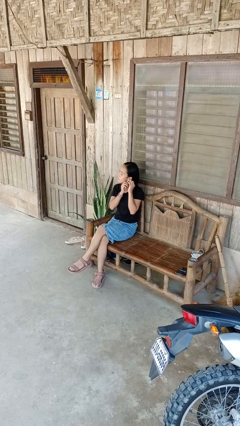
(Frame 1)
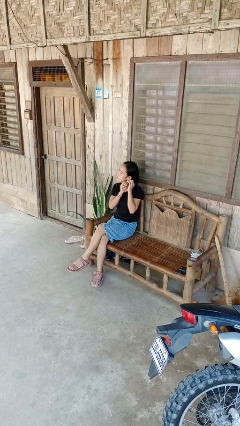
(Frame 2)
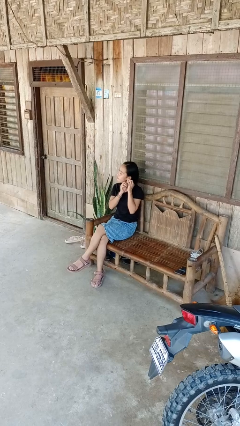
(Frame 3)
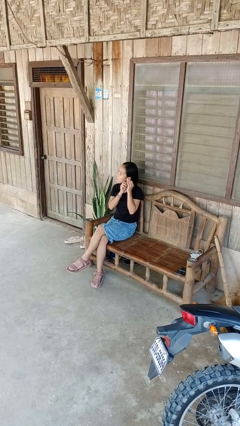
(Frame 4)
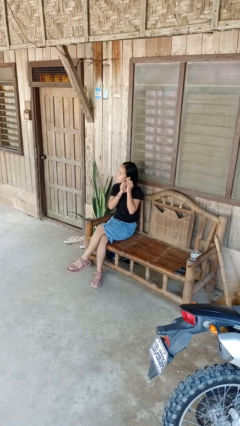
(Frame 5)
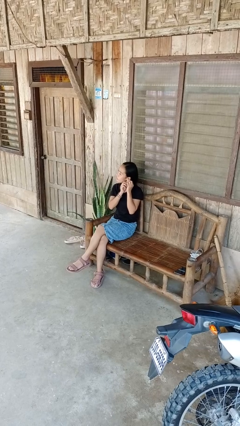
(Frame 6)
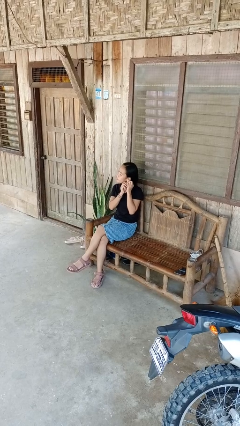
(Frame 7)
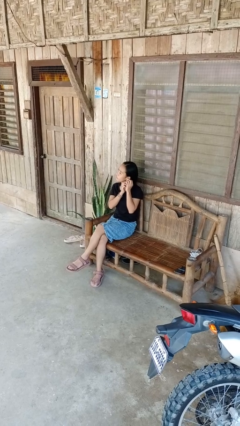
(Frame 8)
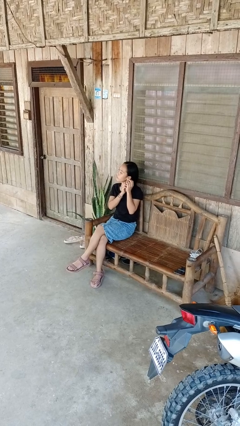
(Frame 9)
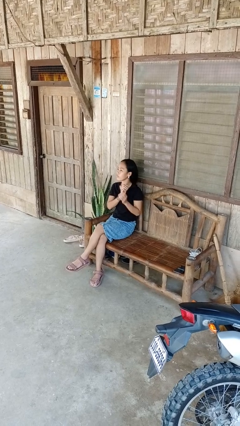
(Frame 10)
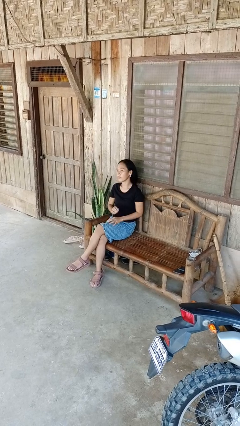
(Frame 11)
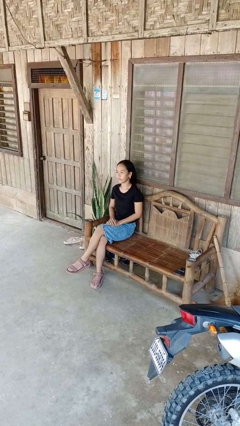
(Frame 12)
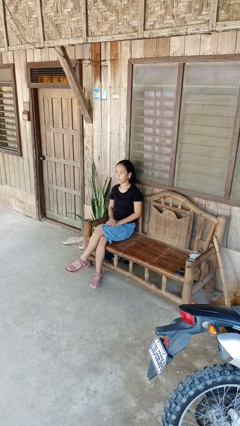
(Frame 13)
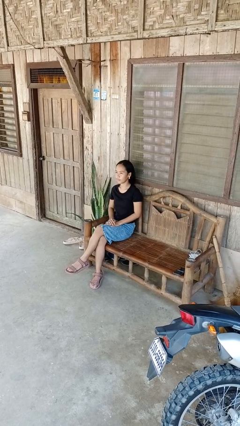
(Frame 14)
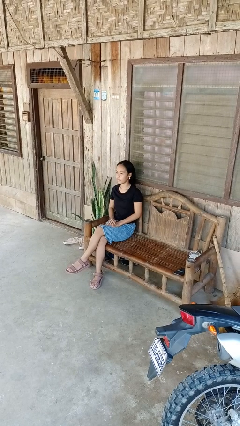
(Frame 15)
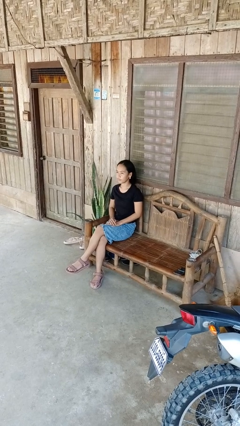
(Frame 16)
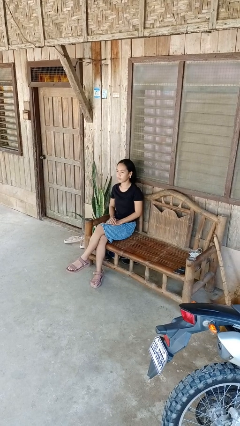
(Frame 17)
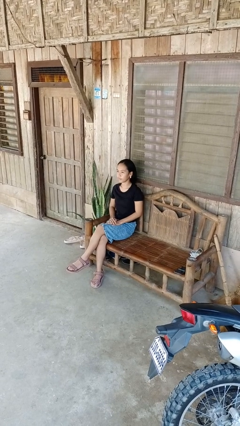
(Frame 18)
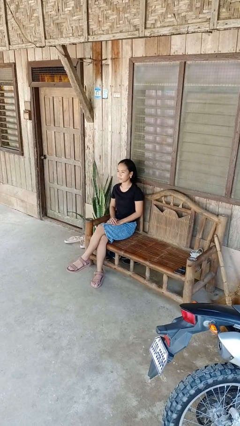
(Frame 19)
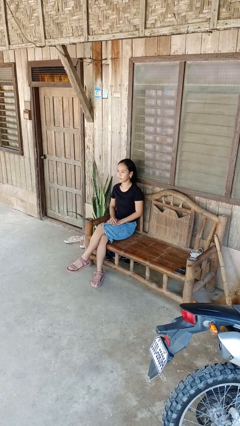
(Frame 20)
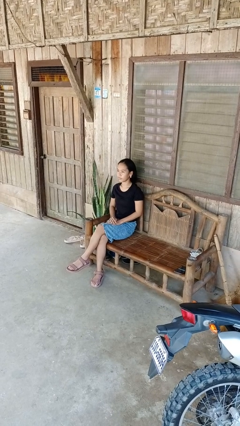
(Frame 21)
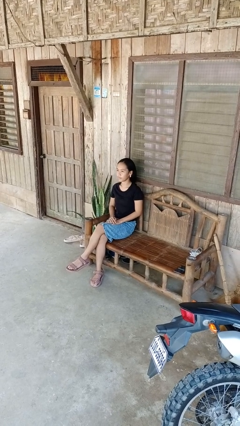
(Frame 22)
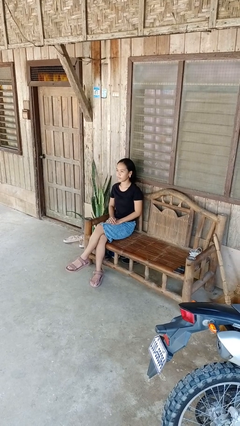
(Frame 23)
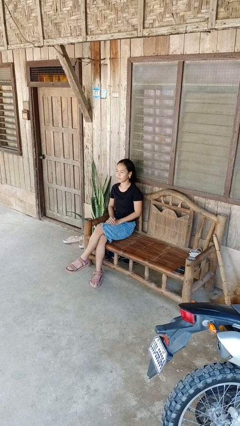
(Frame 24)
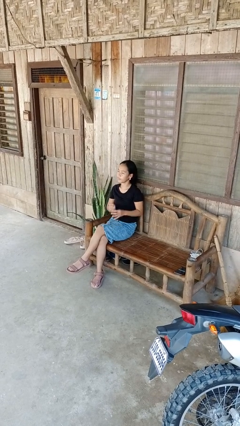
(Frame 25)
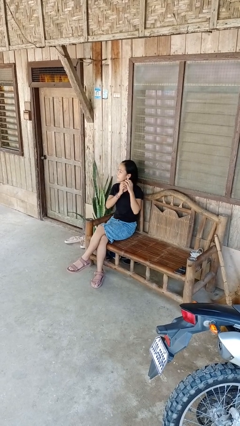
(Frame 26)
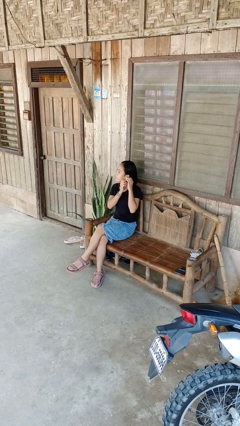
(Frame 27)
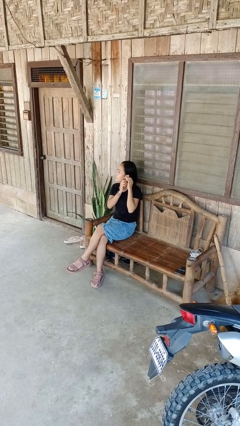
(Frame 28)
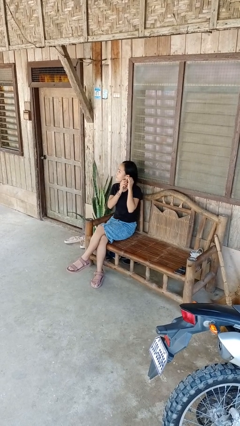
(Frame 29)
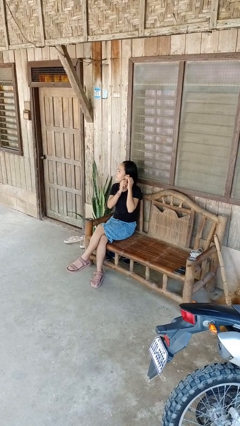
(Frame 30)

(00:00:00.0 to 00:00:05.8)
person puts on earrings

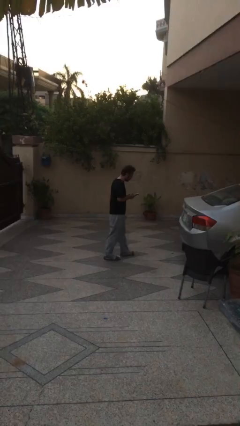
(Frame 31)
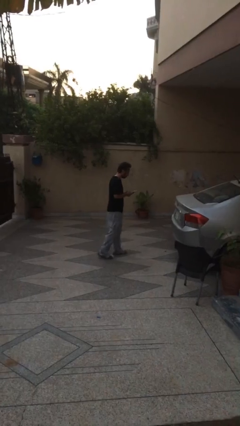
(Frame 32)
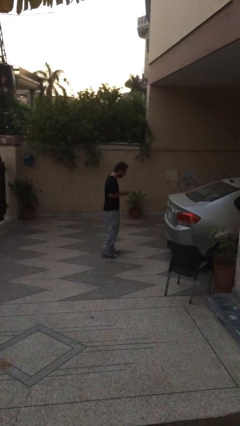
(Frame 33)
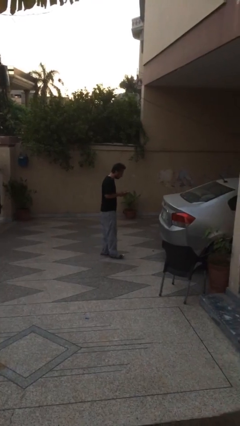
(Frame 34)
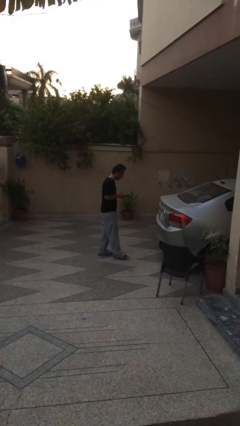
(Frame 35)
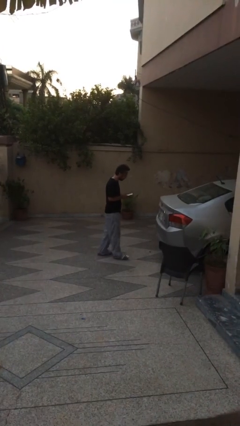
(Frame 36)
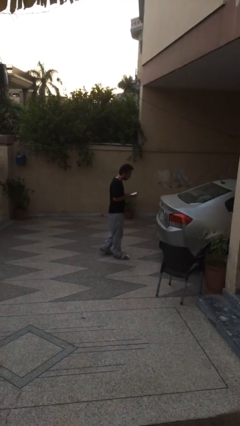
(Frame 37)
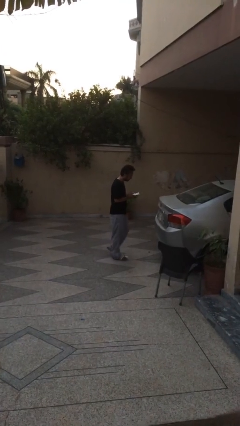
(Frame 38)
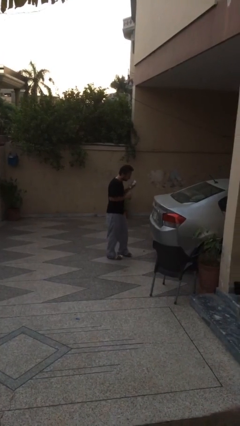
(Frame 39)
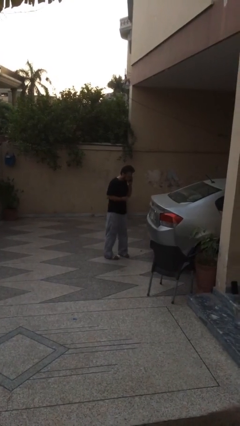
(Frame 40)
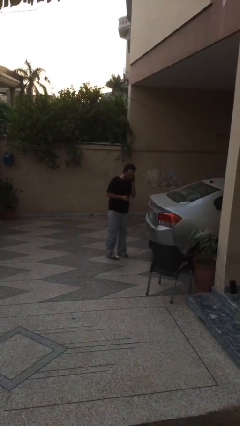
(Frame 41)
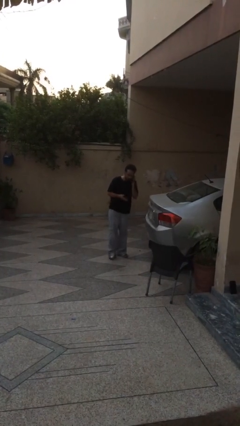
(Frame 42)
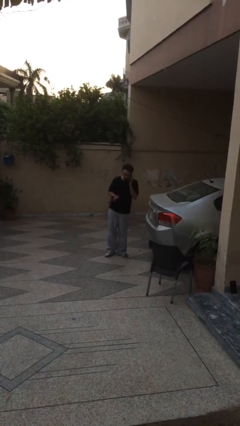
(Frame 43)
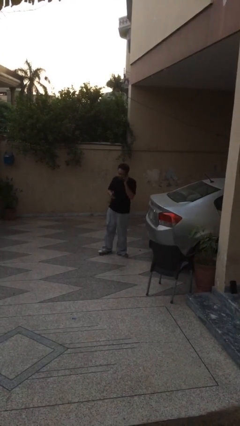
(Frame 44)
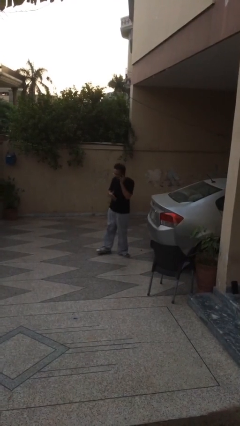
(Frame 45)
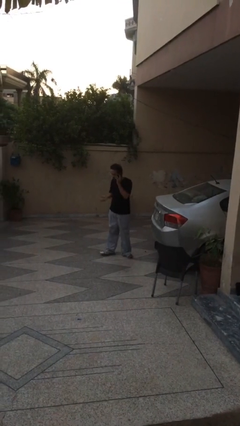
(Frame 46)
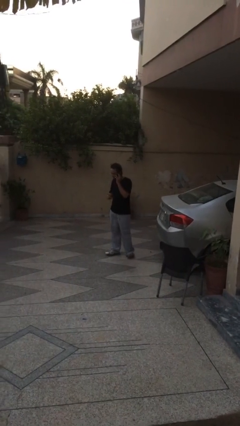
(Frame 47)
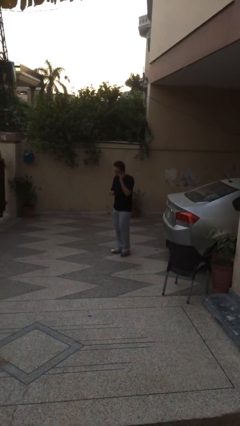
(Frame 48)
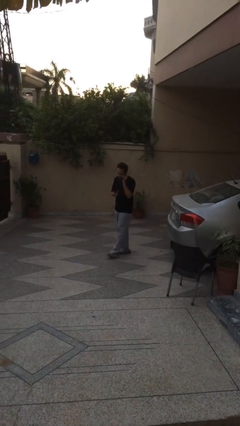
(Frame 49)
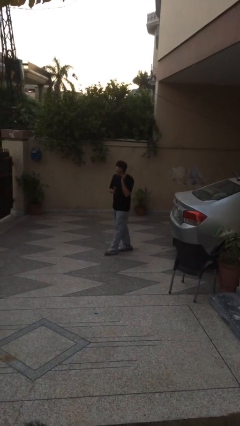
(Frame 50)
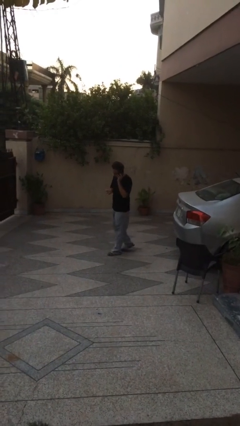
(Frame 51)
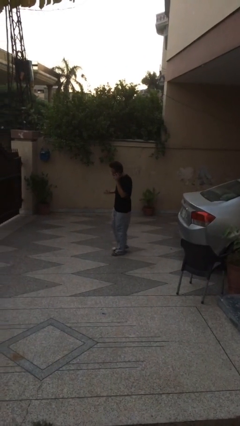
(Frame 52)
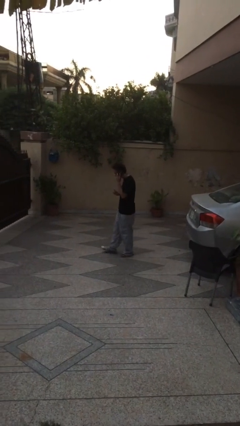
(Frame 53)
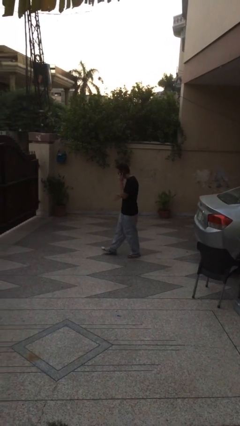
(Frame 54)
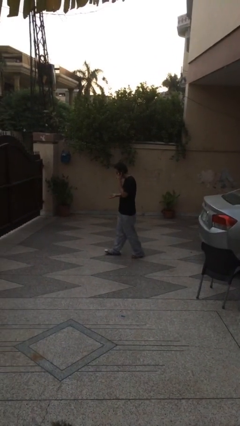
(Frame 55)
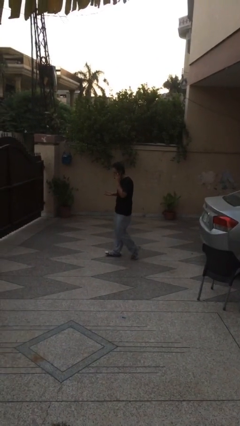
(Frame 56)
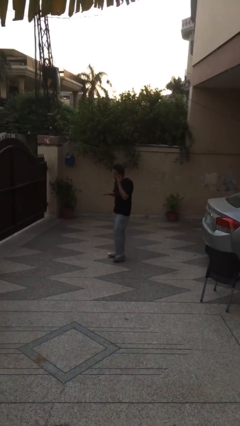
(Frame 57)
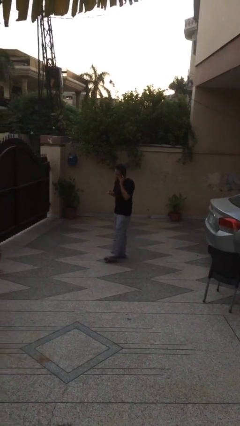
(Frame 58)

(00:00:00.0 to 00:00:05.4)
person talks on phone

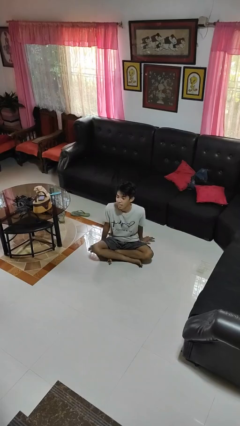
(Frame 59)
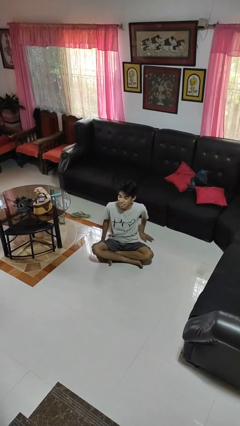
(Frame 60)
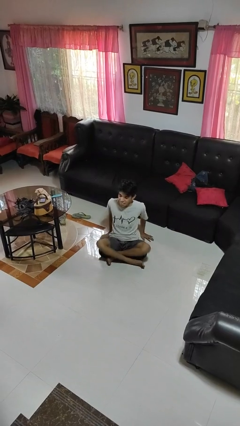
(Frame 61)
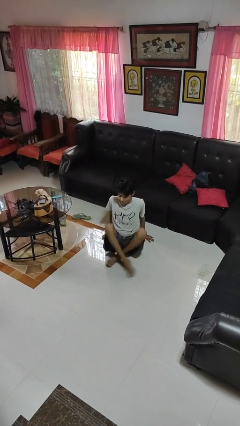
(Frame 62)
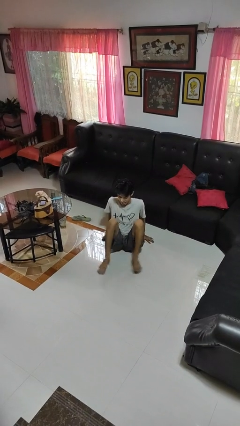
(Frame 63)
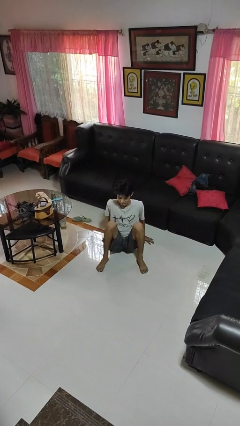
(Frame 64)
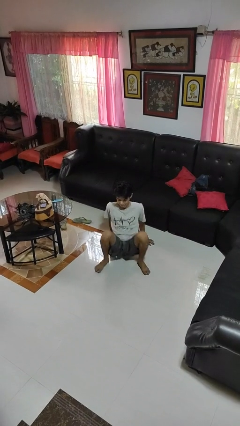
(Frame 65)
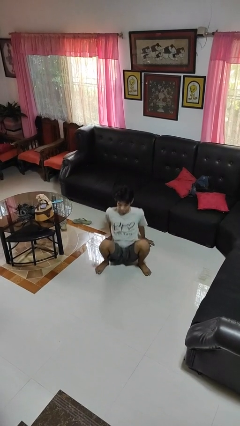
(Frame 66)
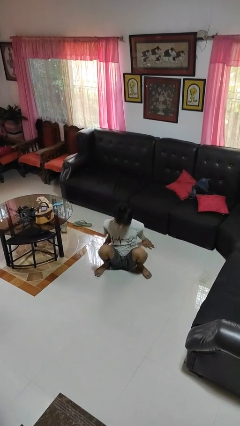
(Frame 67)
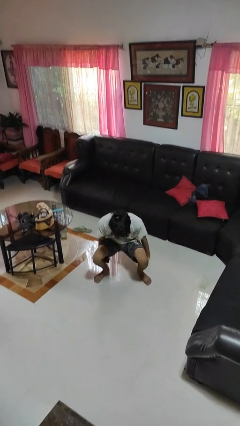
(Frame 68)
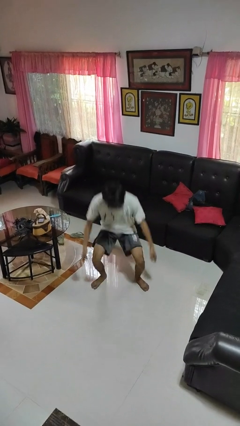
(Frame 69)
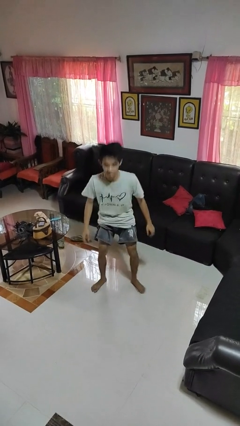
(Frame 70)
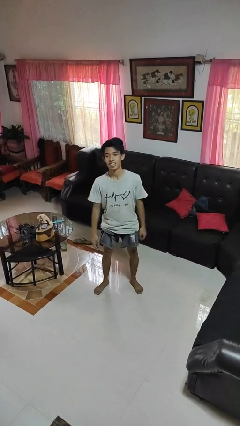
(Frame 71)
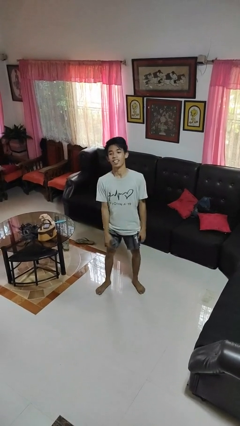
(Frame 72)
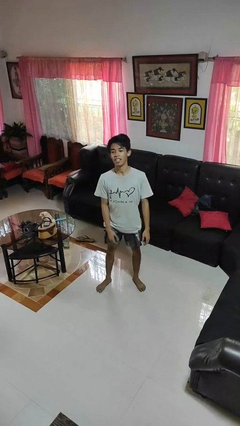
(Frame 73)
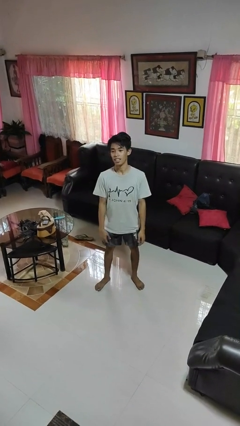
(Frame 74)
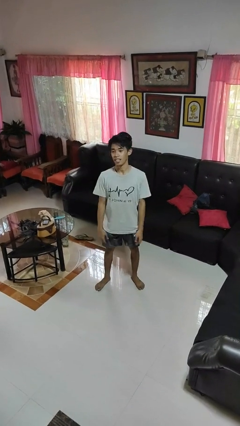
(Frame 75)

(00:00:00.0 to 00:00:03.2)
person stands up from floor

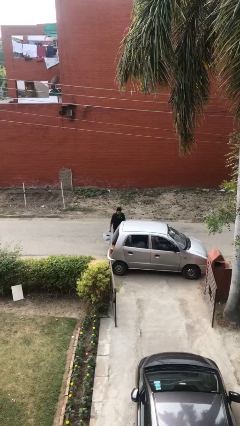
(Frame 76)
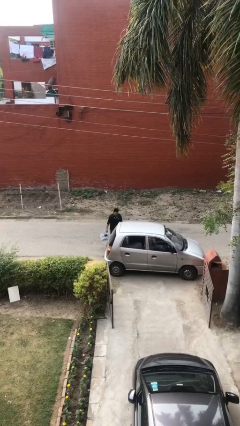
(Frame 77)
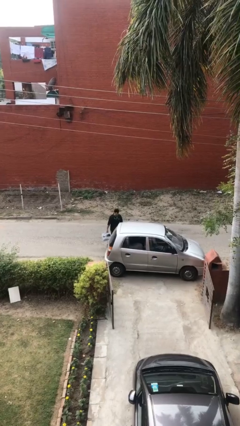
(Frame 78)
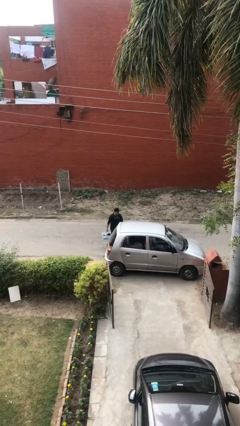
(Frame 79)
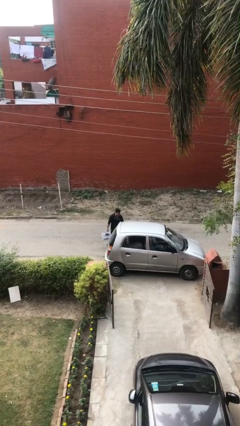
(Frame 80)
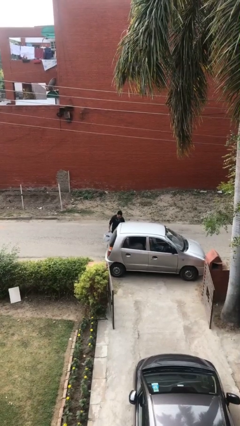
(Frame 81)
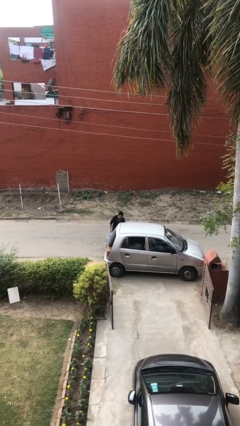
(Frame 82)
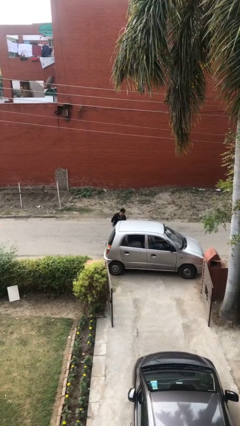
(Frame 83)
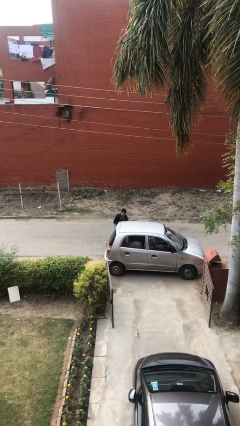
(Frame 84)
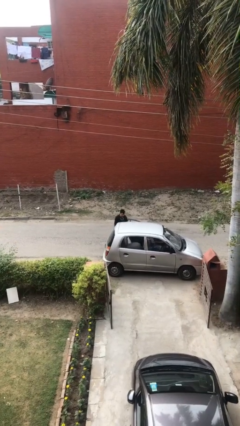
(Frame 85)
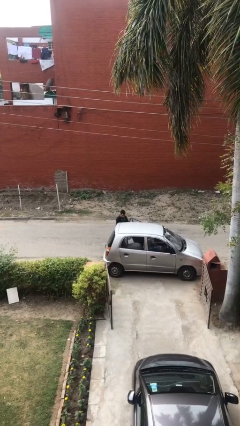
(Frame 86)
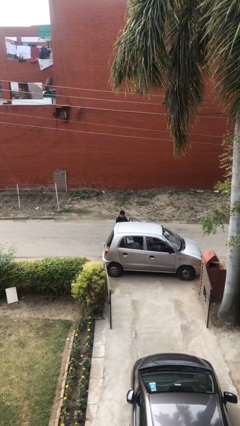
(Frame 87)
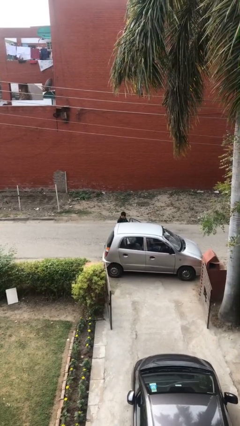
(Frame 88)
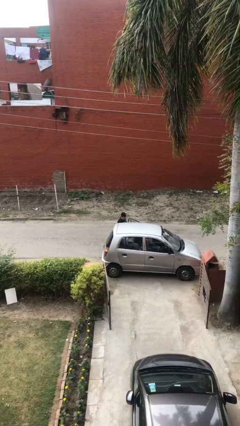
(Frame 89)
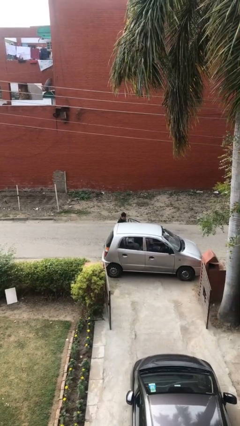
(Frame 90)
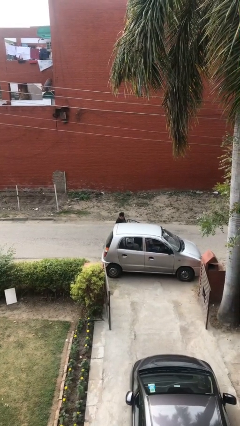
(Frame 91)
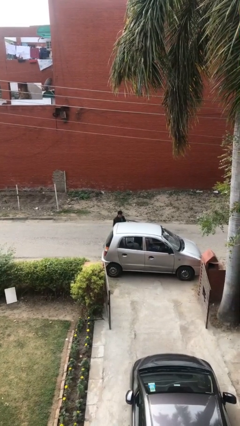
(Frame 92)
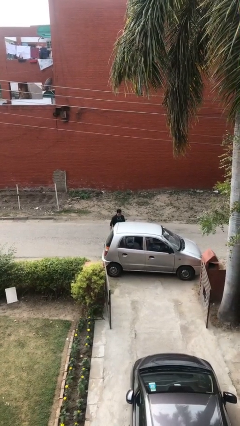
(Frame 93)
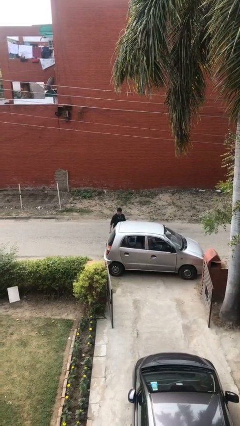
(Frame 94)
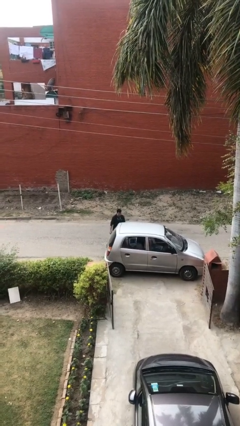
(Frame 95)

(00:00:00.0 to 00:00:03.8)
person loads car
